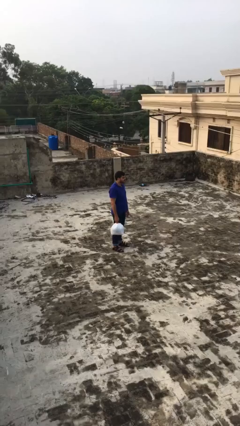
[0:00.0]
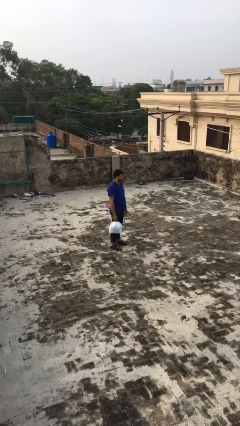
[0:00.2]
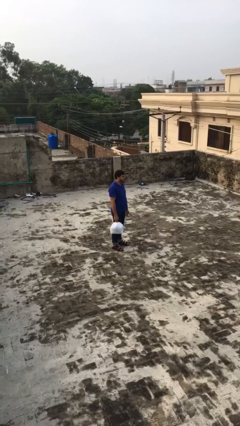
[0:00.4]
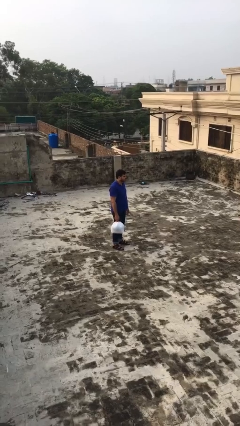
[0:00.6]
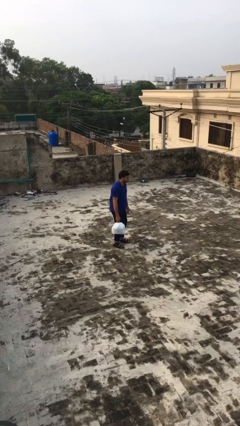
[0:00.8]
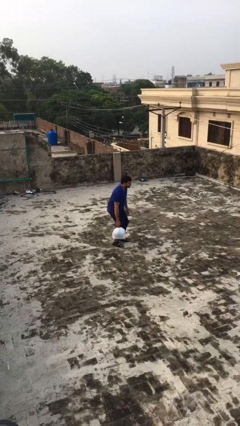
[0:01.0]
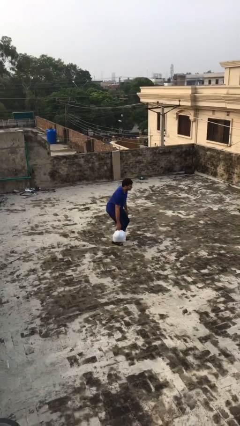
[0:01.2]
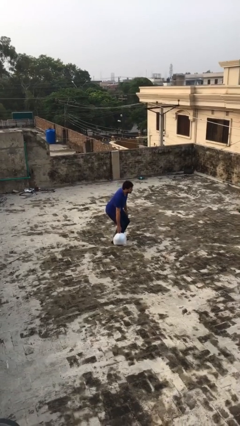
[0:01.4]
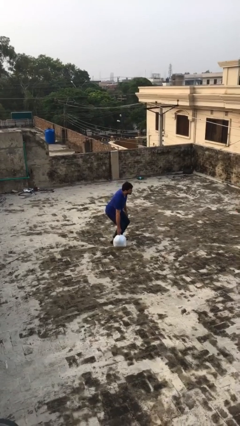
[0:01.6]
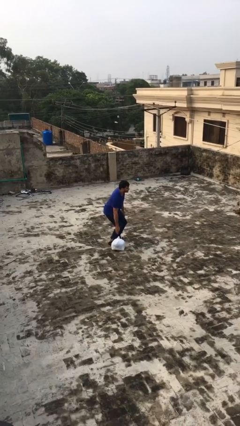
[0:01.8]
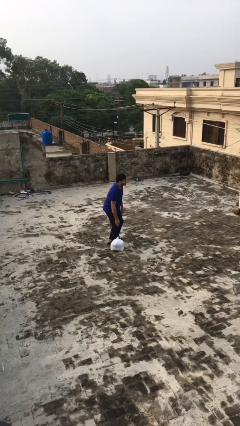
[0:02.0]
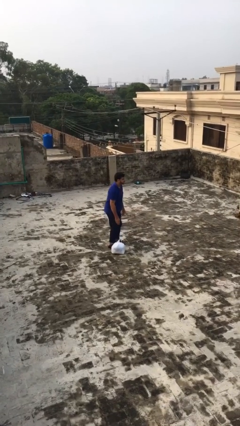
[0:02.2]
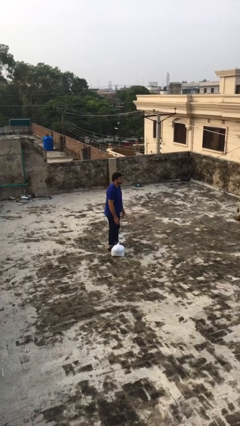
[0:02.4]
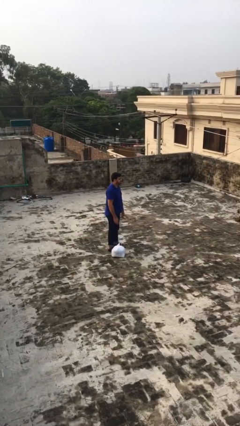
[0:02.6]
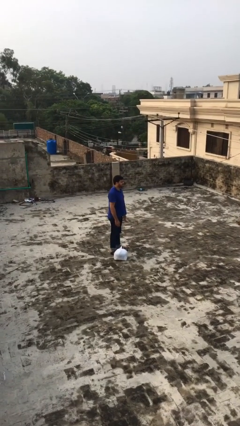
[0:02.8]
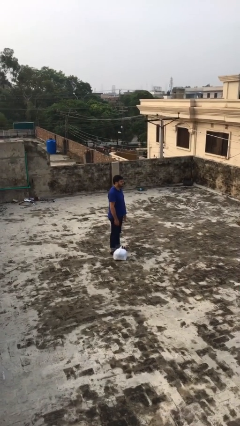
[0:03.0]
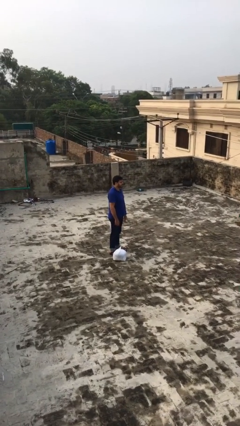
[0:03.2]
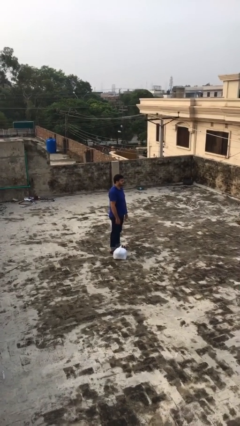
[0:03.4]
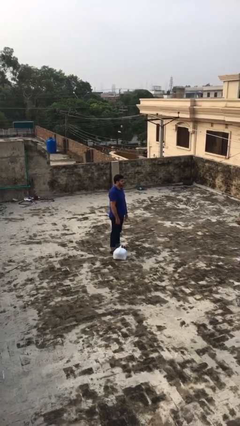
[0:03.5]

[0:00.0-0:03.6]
person puts down object on floor

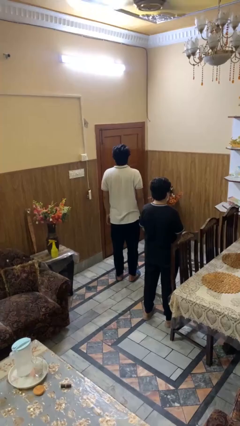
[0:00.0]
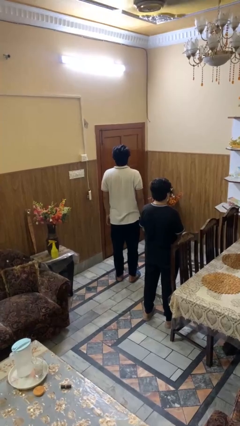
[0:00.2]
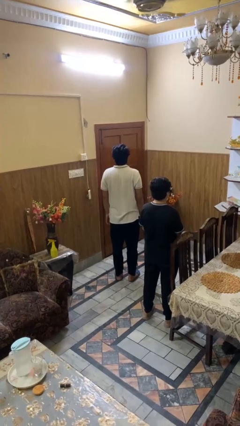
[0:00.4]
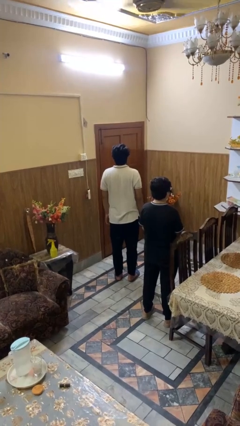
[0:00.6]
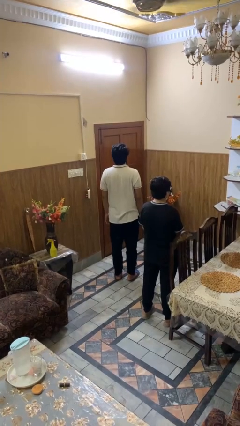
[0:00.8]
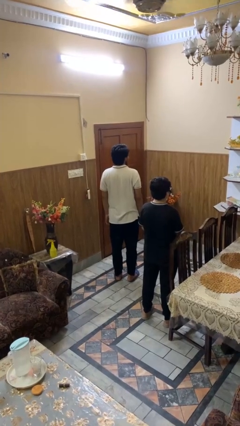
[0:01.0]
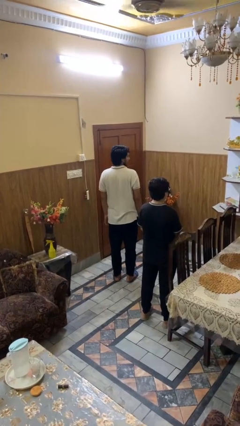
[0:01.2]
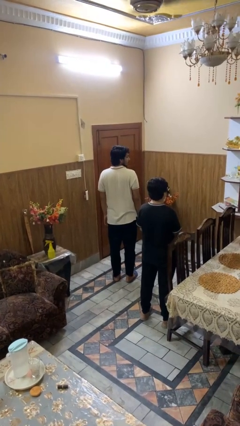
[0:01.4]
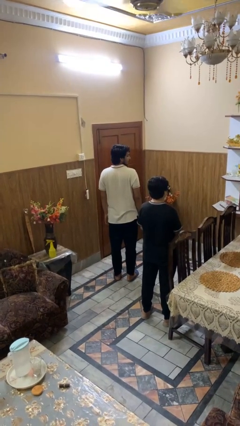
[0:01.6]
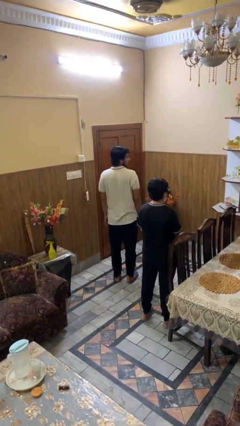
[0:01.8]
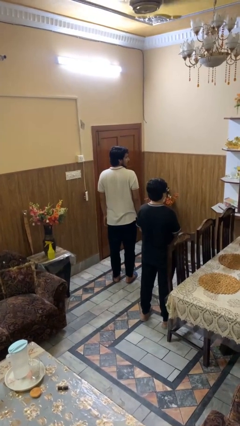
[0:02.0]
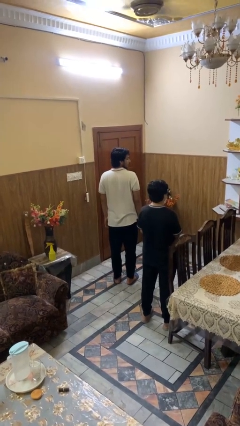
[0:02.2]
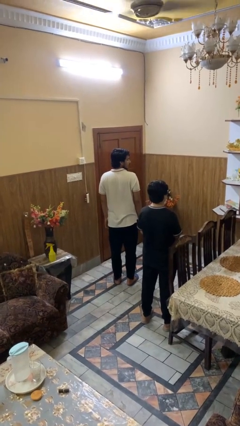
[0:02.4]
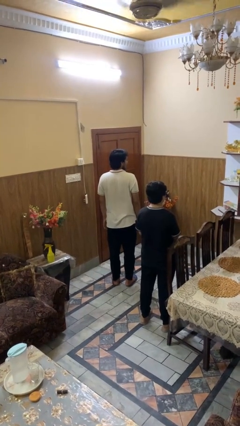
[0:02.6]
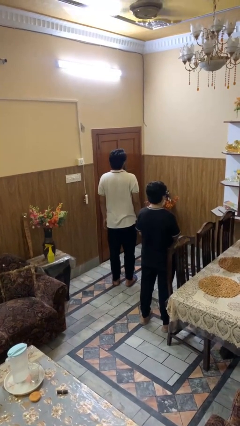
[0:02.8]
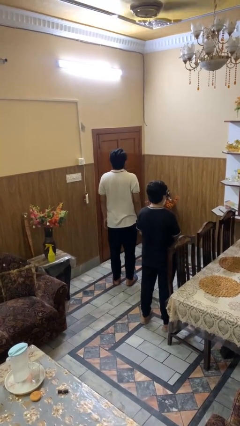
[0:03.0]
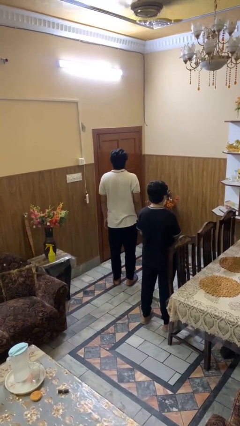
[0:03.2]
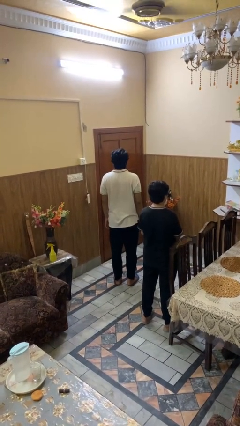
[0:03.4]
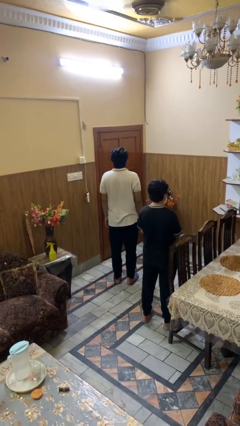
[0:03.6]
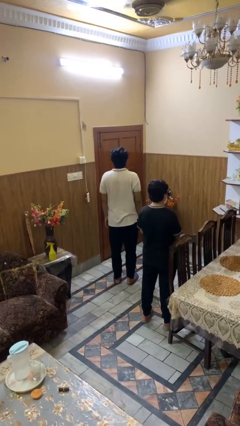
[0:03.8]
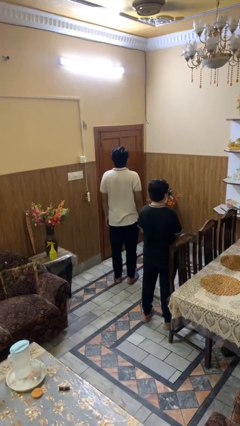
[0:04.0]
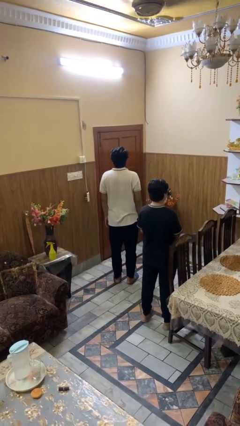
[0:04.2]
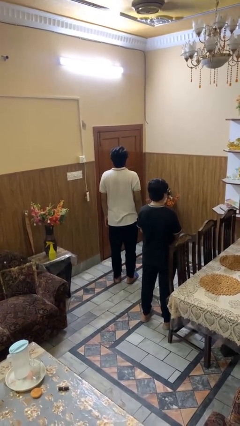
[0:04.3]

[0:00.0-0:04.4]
person looks over shoulder

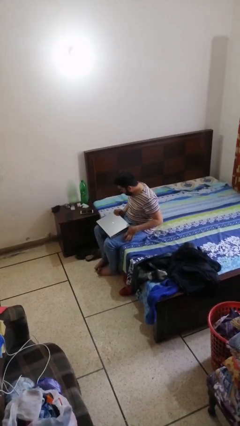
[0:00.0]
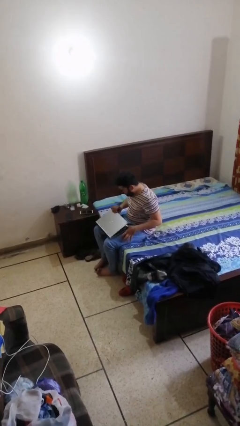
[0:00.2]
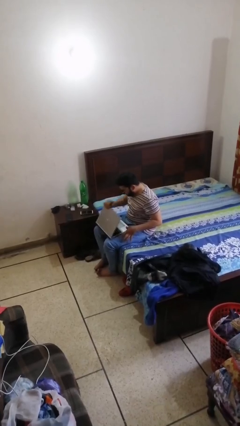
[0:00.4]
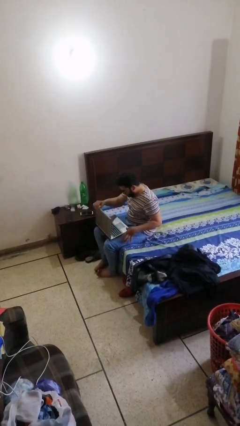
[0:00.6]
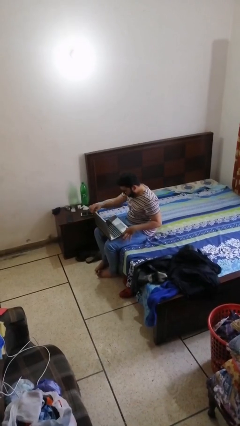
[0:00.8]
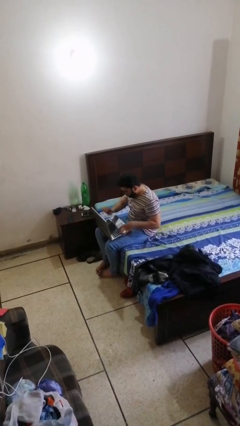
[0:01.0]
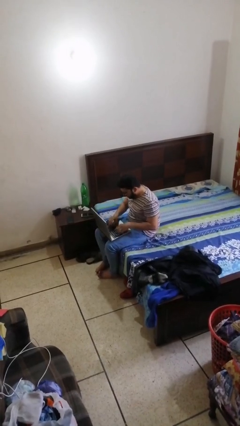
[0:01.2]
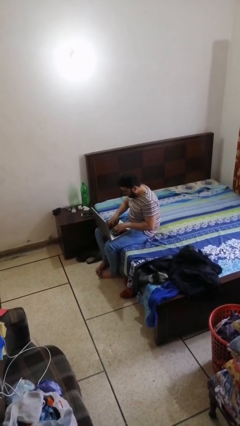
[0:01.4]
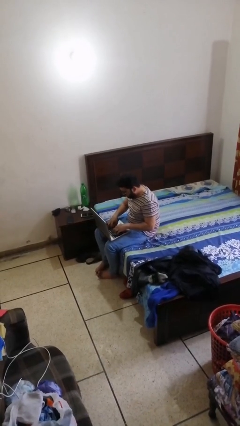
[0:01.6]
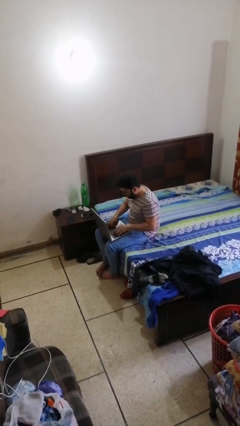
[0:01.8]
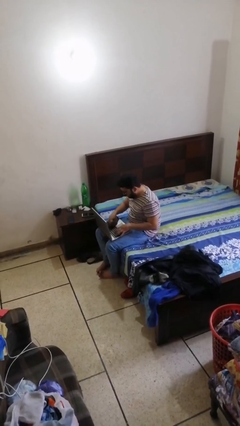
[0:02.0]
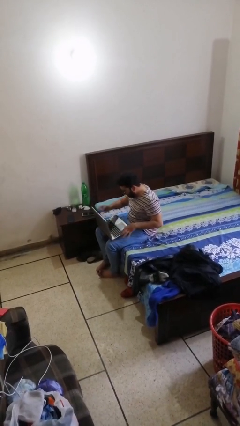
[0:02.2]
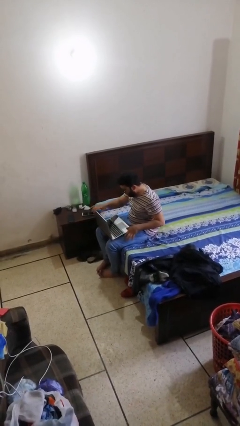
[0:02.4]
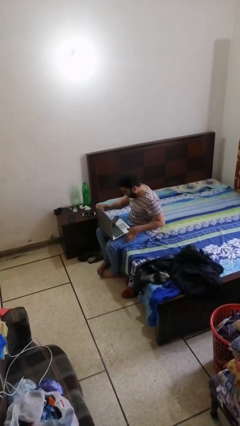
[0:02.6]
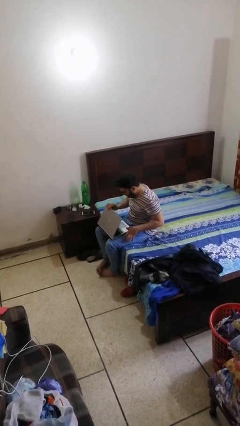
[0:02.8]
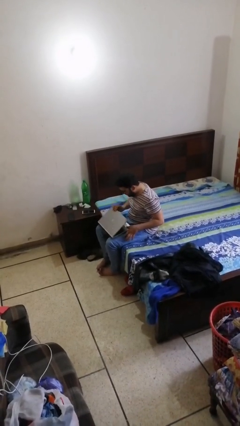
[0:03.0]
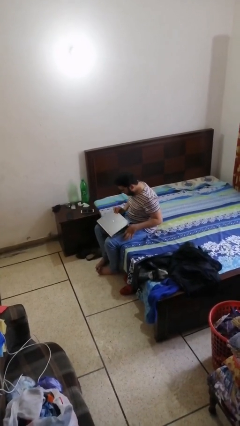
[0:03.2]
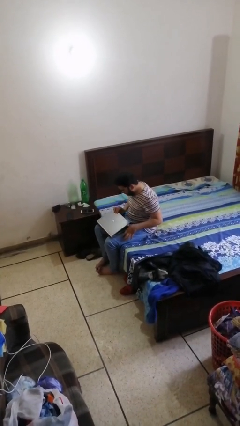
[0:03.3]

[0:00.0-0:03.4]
person interacts with laptop

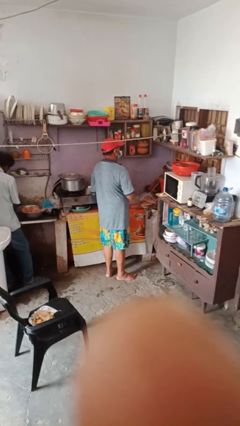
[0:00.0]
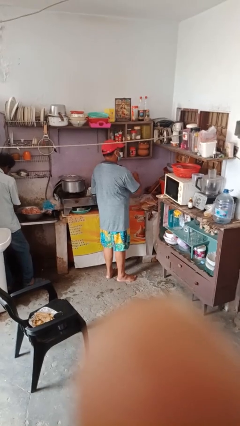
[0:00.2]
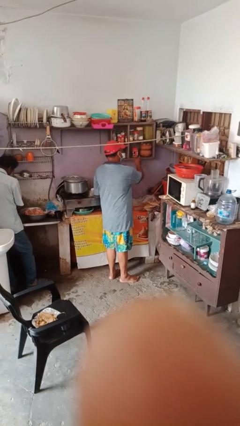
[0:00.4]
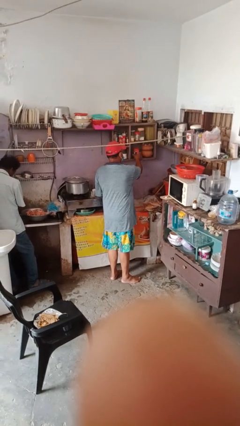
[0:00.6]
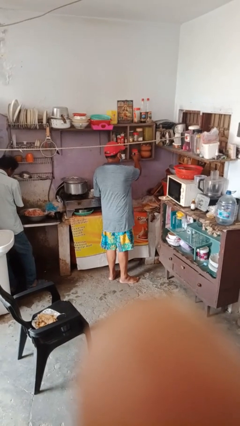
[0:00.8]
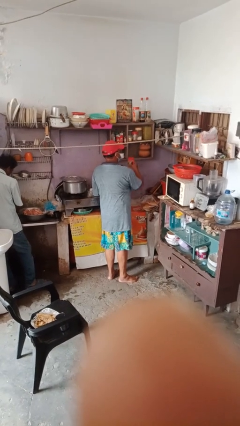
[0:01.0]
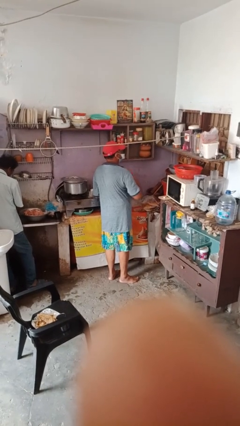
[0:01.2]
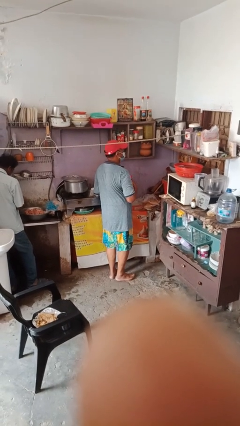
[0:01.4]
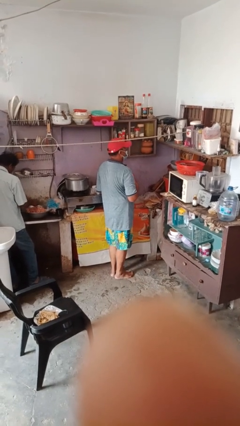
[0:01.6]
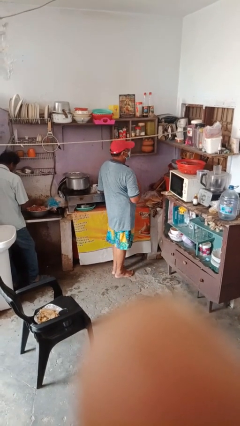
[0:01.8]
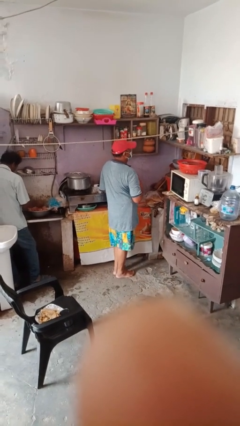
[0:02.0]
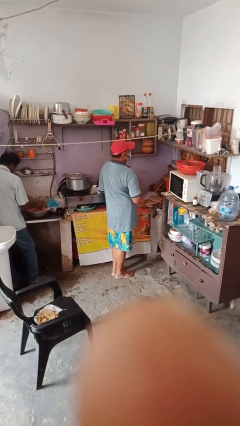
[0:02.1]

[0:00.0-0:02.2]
person picks up object from shelf

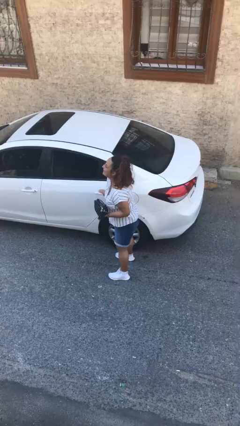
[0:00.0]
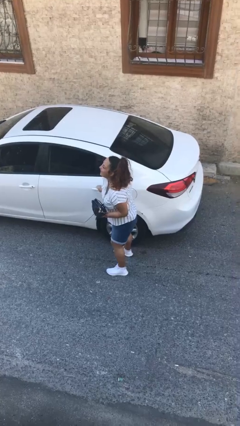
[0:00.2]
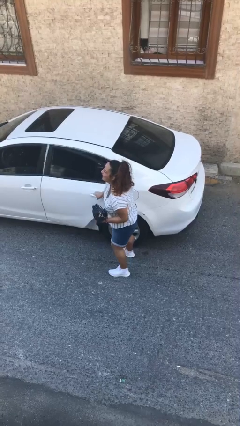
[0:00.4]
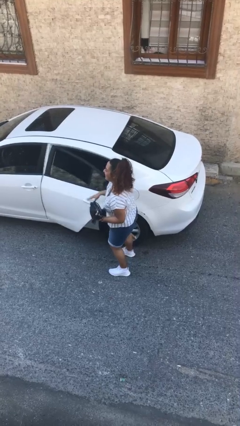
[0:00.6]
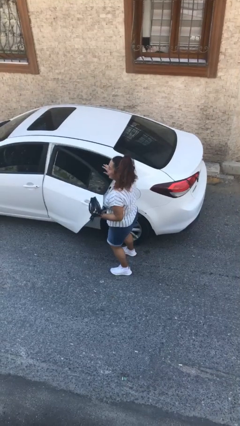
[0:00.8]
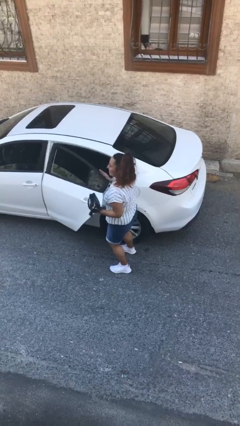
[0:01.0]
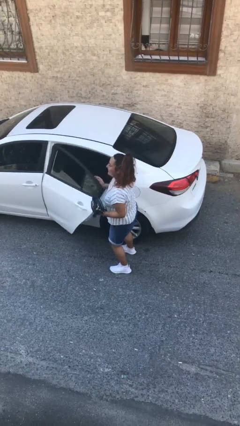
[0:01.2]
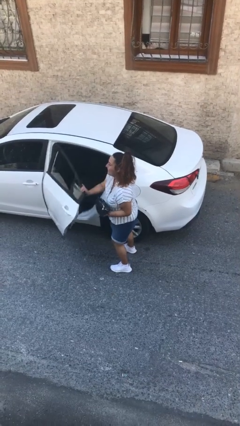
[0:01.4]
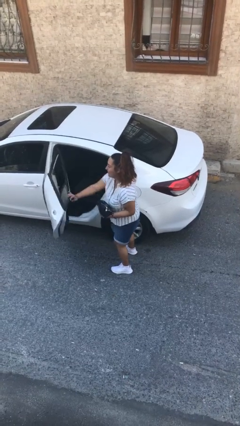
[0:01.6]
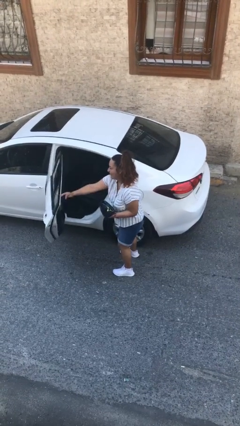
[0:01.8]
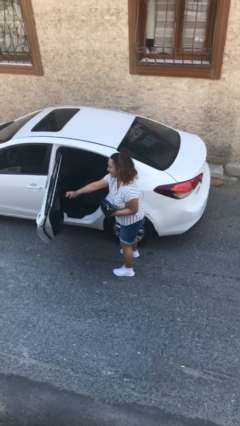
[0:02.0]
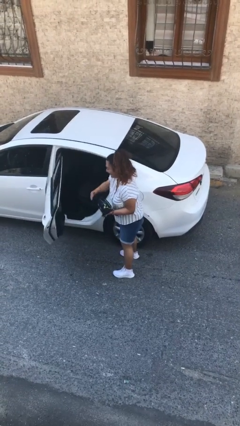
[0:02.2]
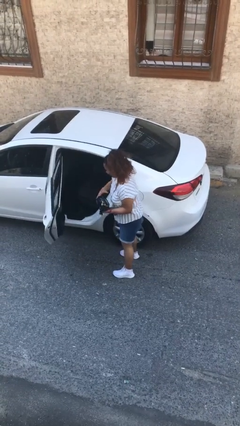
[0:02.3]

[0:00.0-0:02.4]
person opens car door

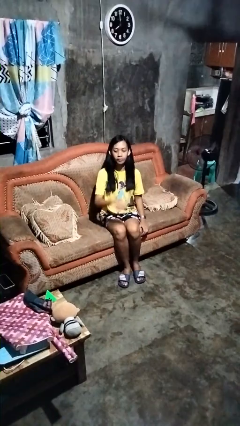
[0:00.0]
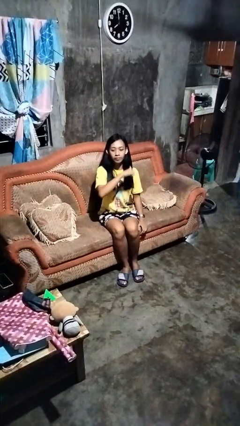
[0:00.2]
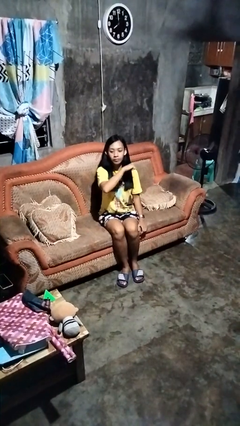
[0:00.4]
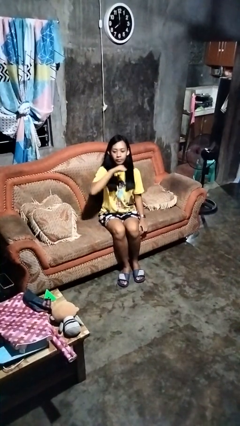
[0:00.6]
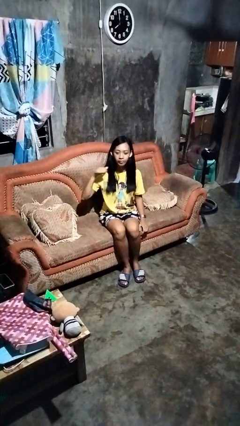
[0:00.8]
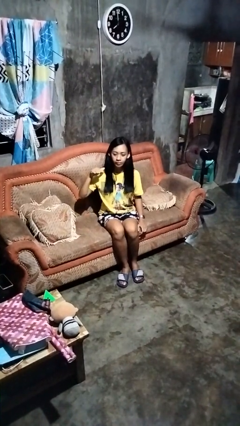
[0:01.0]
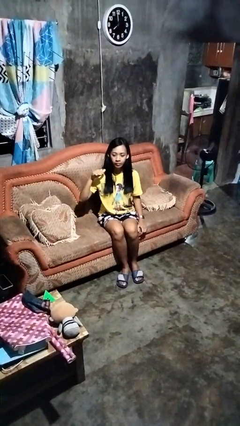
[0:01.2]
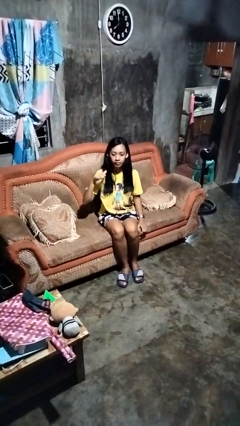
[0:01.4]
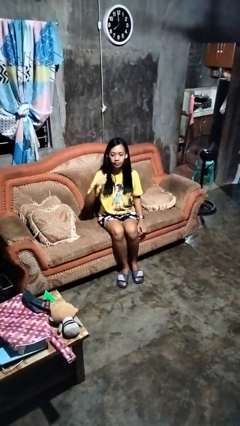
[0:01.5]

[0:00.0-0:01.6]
person gestures cut
